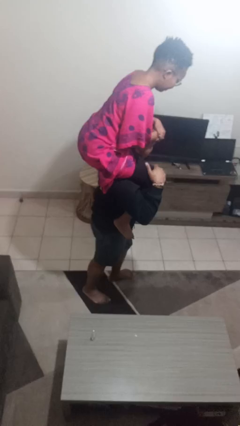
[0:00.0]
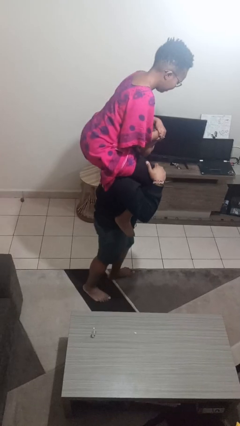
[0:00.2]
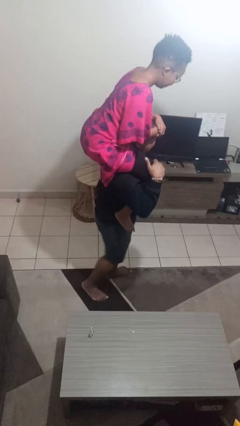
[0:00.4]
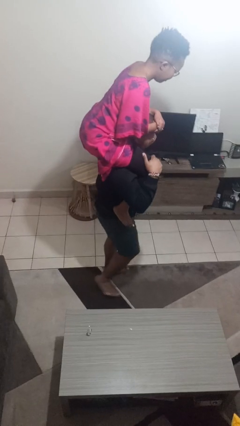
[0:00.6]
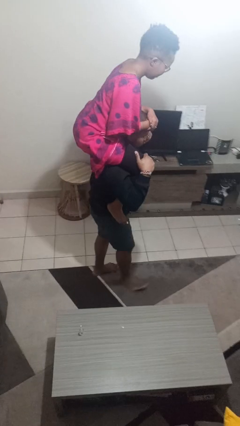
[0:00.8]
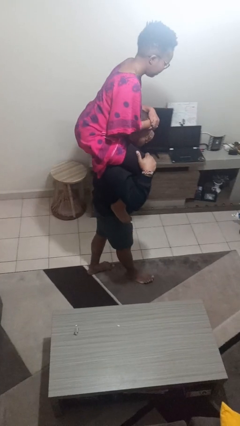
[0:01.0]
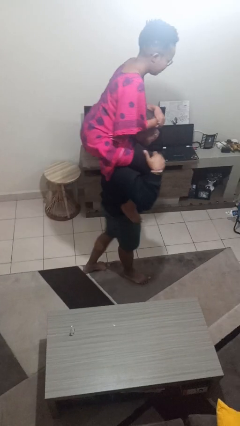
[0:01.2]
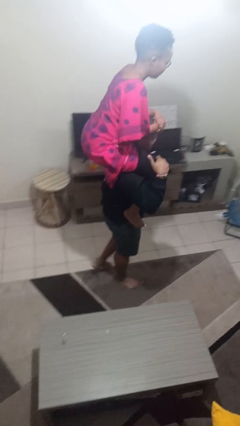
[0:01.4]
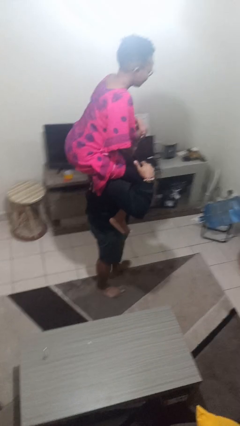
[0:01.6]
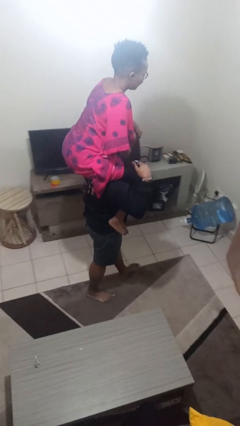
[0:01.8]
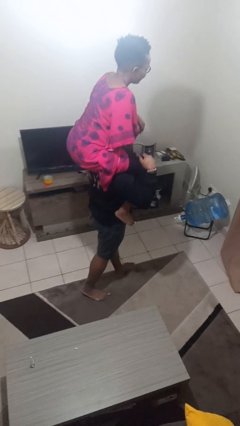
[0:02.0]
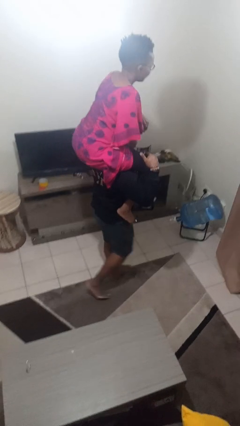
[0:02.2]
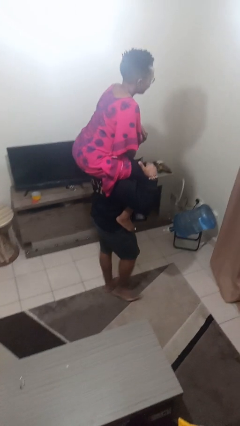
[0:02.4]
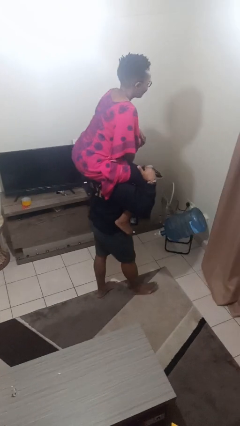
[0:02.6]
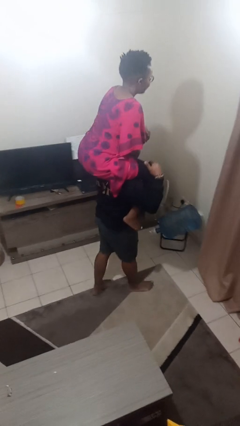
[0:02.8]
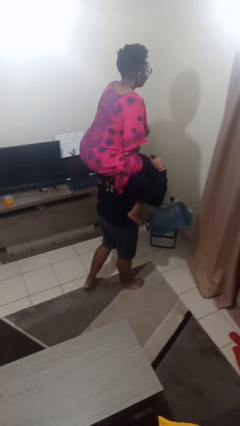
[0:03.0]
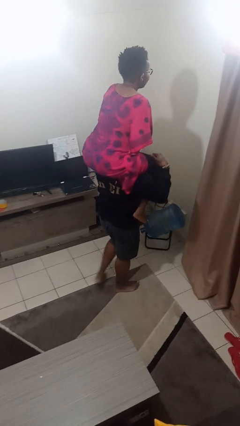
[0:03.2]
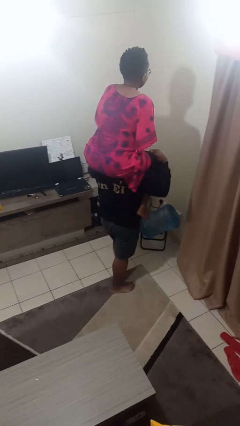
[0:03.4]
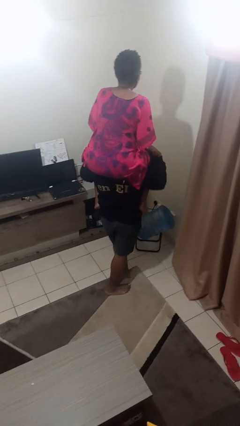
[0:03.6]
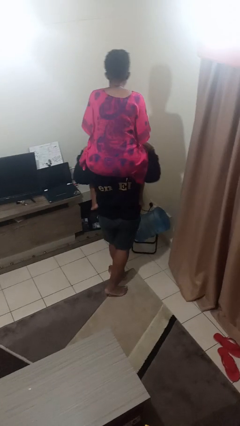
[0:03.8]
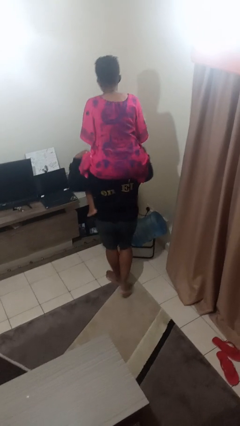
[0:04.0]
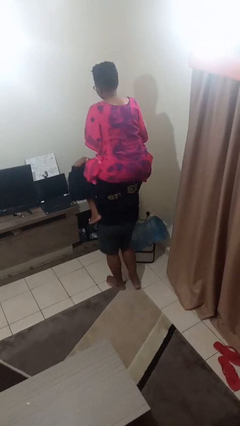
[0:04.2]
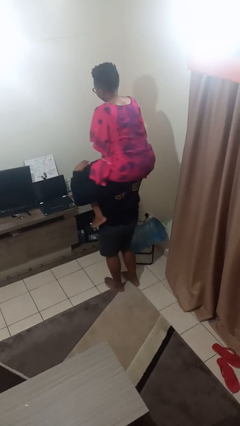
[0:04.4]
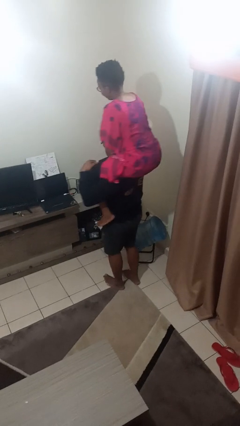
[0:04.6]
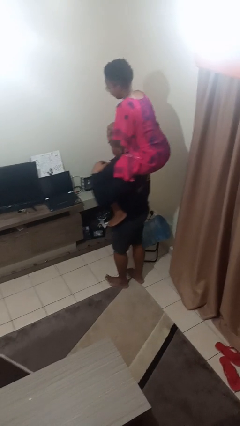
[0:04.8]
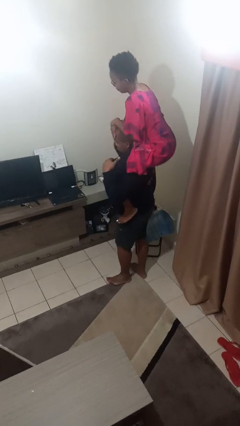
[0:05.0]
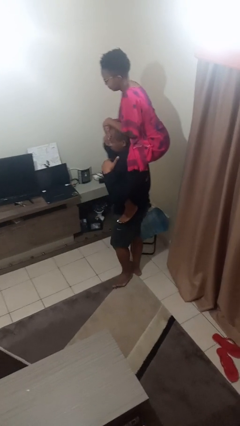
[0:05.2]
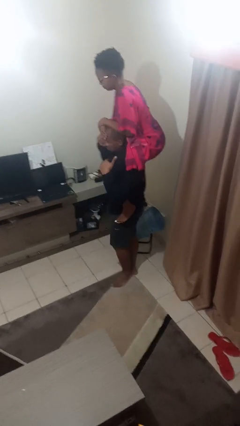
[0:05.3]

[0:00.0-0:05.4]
person carries person on shoulders

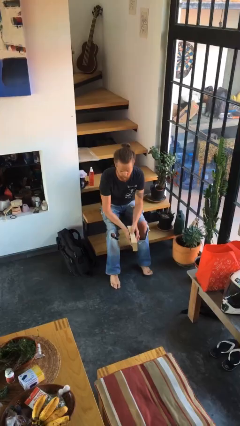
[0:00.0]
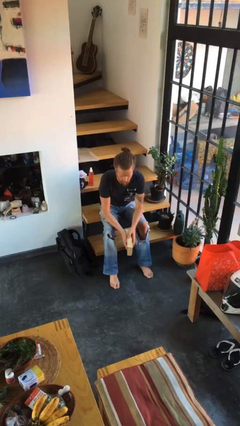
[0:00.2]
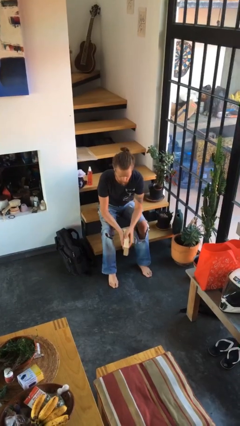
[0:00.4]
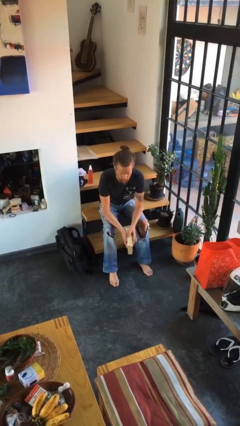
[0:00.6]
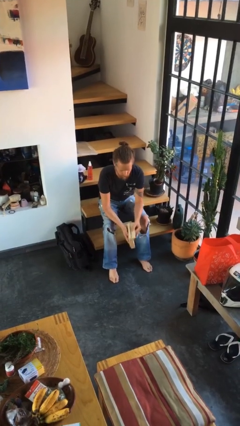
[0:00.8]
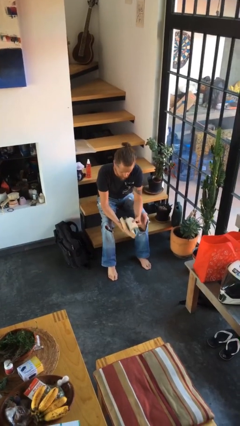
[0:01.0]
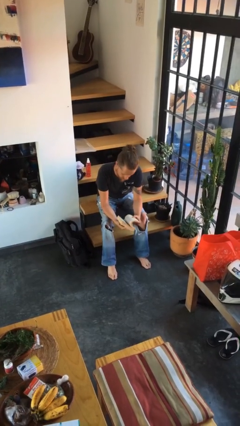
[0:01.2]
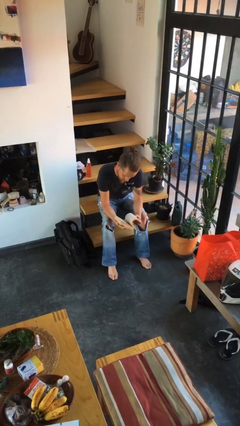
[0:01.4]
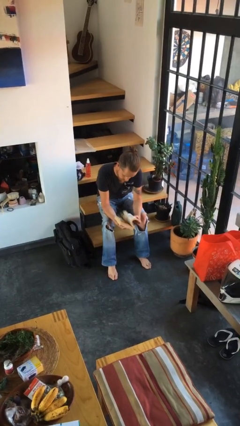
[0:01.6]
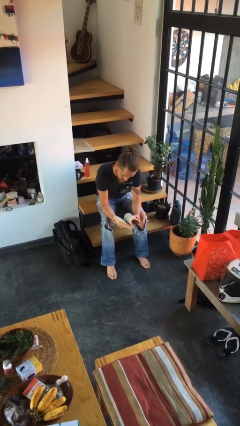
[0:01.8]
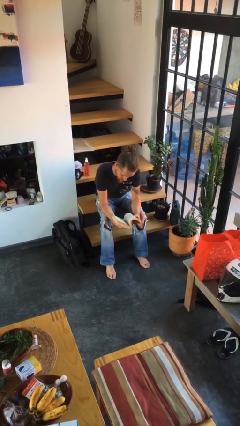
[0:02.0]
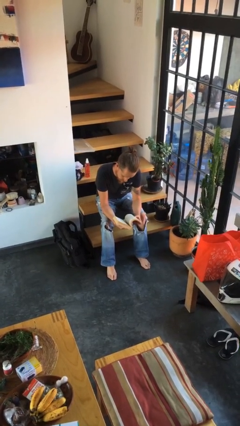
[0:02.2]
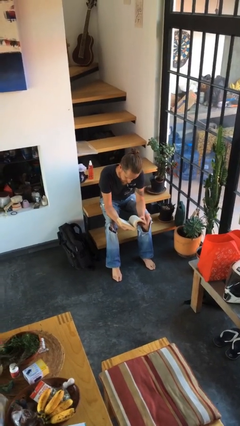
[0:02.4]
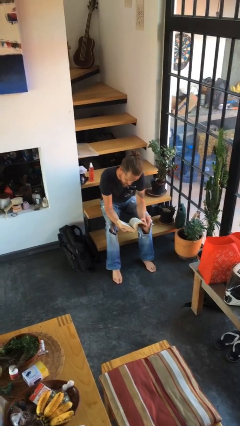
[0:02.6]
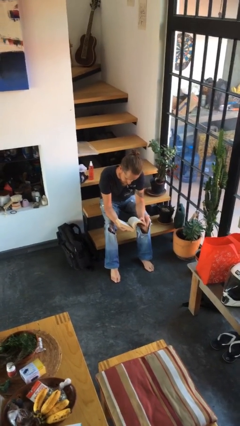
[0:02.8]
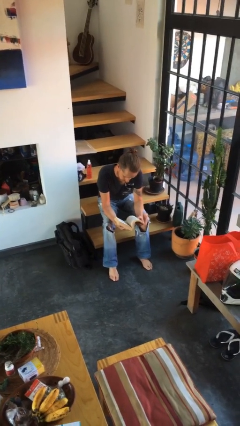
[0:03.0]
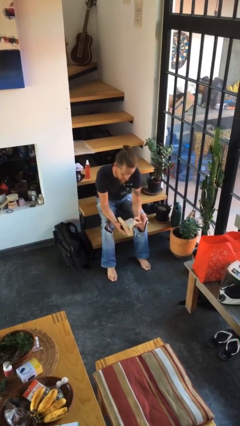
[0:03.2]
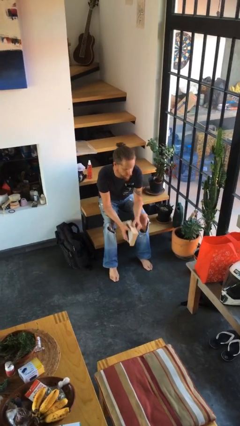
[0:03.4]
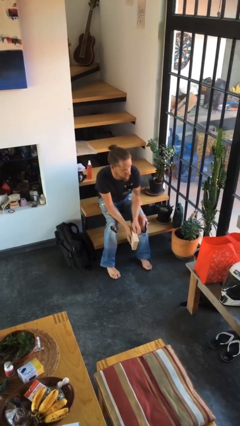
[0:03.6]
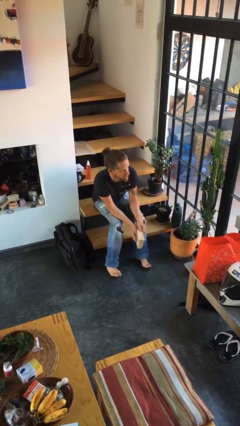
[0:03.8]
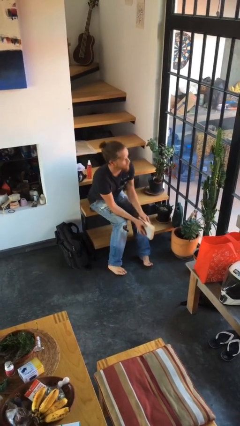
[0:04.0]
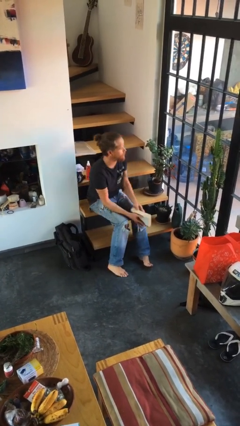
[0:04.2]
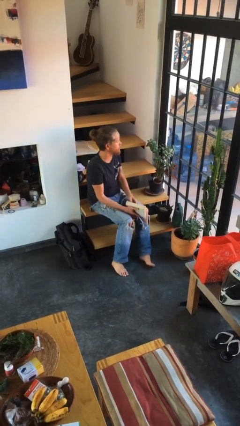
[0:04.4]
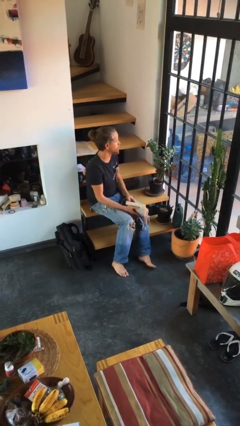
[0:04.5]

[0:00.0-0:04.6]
person reads book

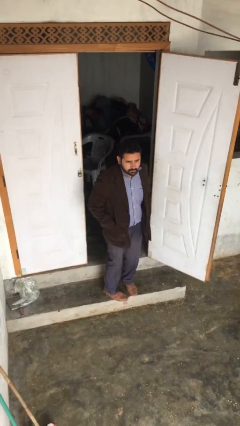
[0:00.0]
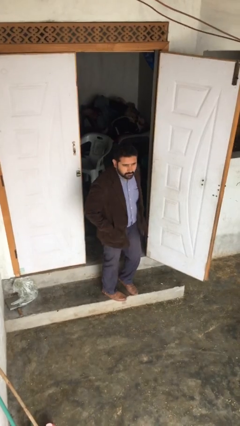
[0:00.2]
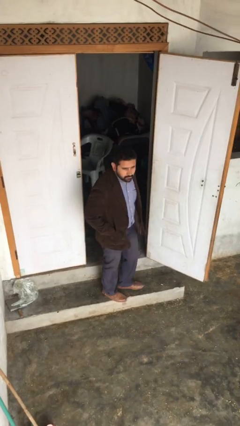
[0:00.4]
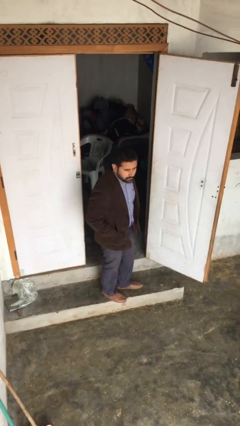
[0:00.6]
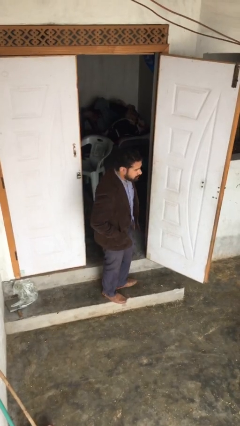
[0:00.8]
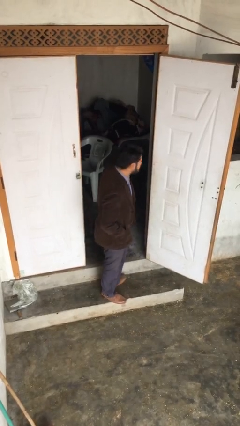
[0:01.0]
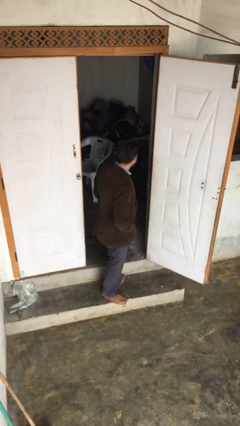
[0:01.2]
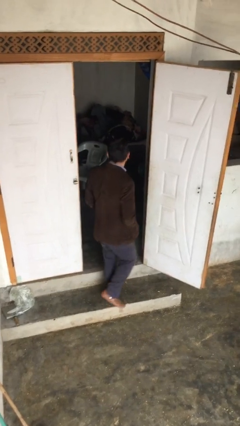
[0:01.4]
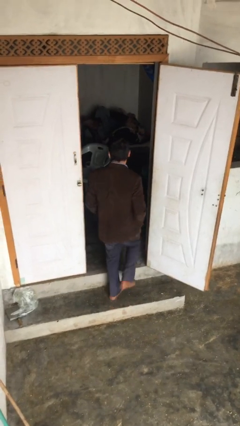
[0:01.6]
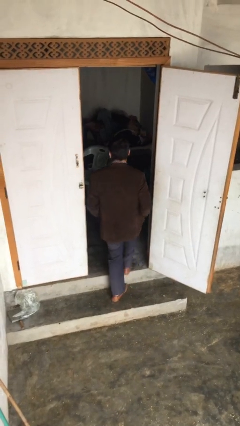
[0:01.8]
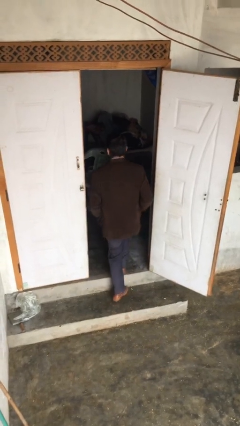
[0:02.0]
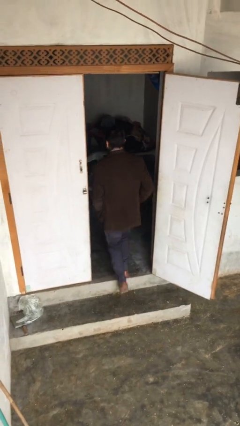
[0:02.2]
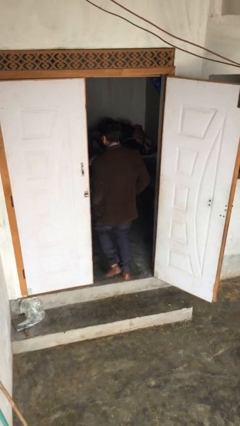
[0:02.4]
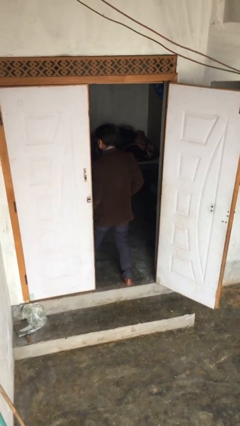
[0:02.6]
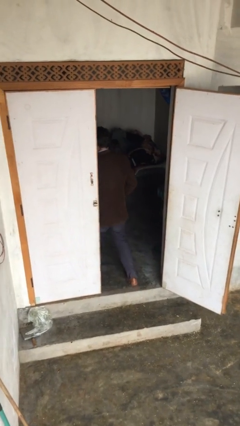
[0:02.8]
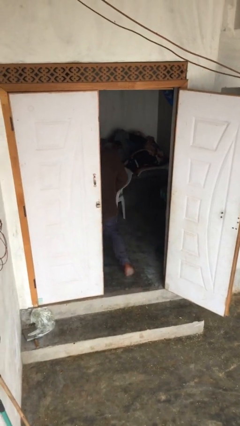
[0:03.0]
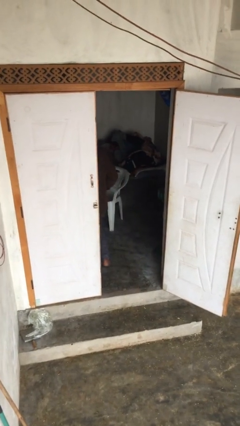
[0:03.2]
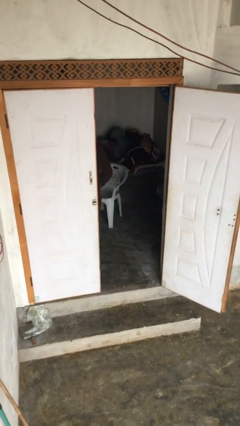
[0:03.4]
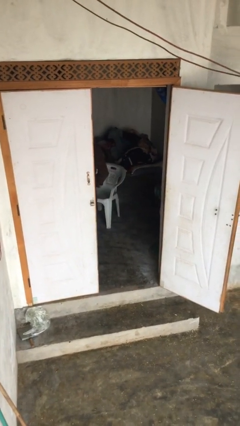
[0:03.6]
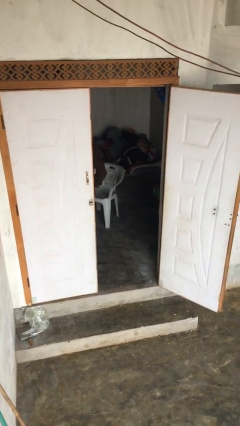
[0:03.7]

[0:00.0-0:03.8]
person exits scene through structure

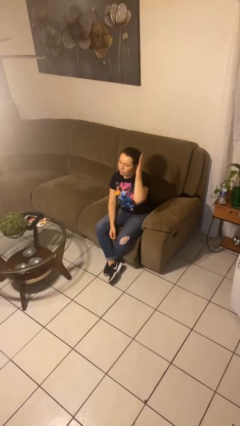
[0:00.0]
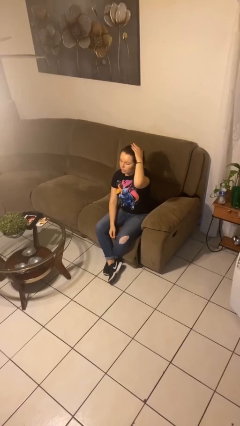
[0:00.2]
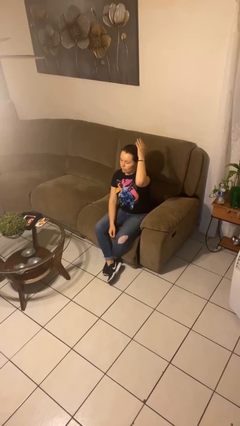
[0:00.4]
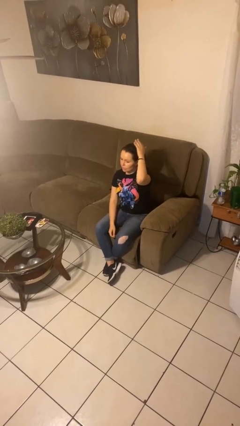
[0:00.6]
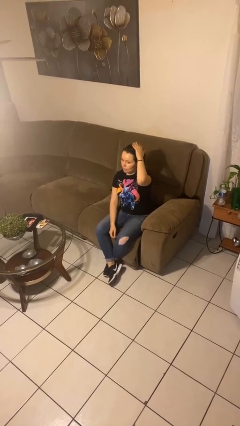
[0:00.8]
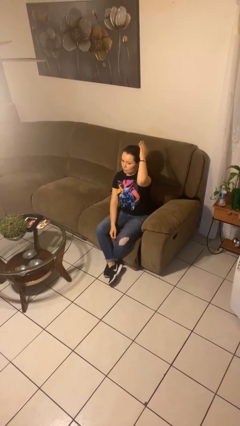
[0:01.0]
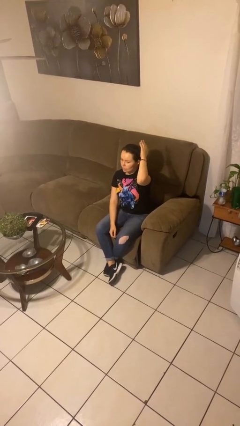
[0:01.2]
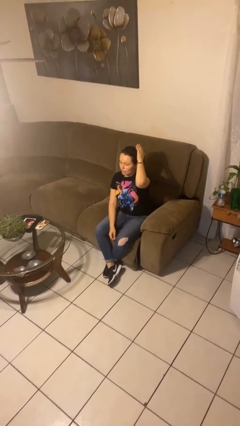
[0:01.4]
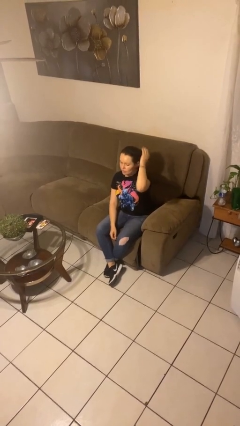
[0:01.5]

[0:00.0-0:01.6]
person pats head

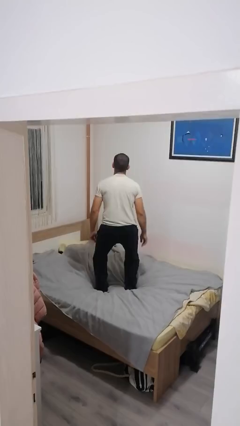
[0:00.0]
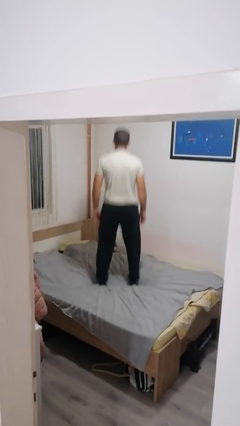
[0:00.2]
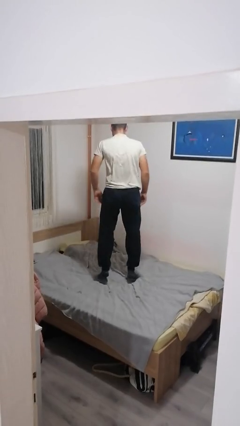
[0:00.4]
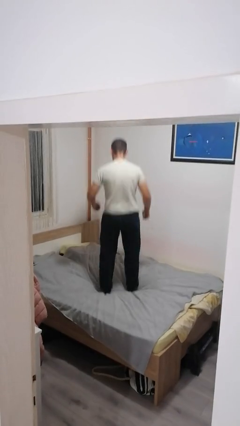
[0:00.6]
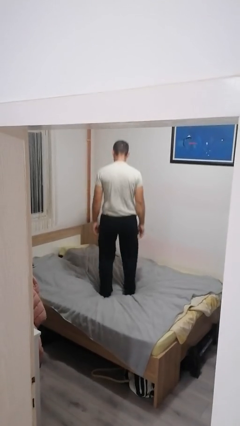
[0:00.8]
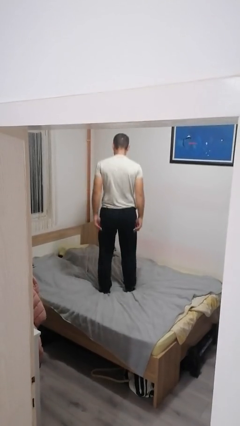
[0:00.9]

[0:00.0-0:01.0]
person jumps on bed

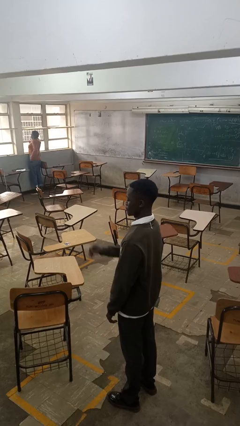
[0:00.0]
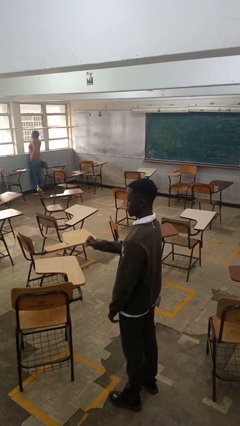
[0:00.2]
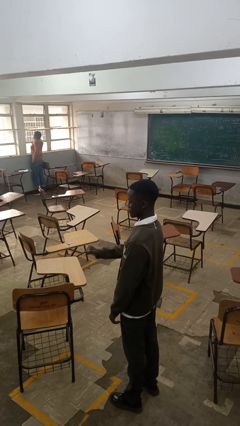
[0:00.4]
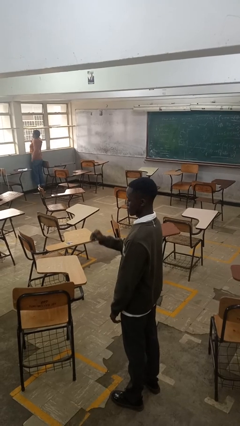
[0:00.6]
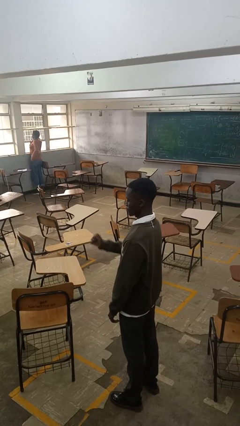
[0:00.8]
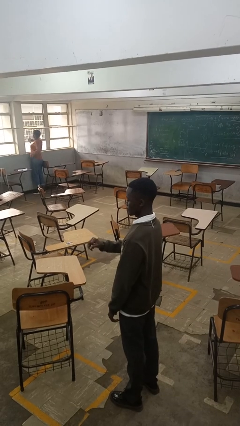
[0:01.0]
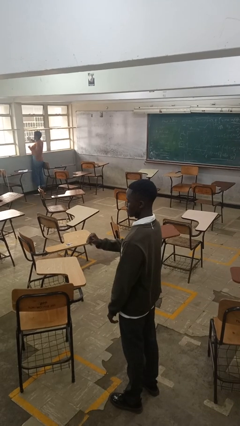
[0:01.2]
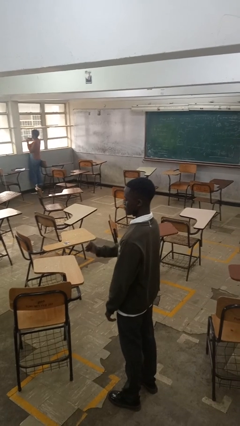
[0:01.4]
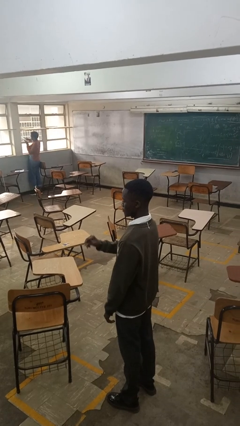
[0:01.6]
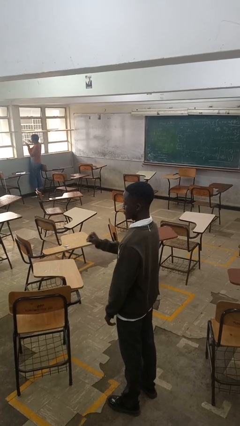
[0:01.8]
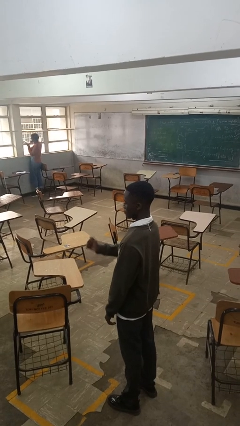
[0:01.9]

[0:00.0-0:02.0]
person snaps fingers
